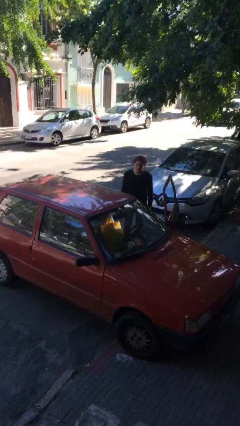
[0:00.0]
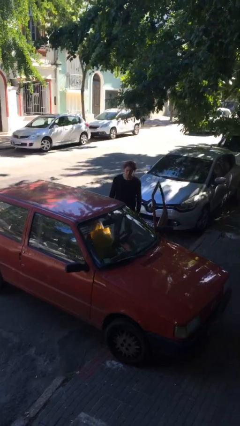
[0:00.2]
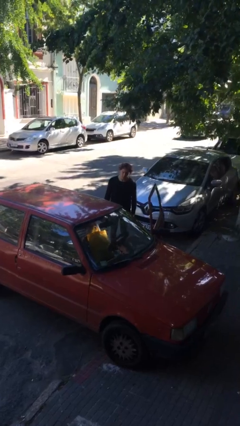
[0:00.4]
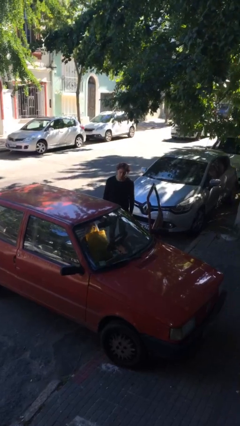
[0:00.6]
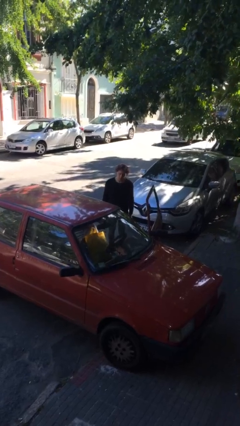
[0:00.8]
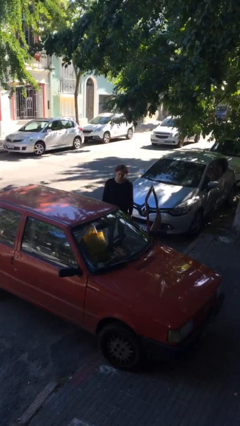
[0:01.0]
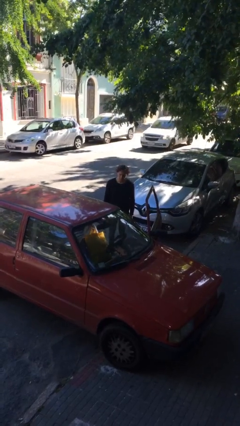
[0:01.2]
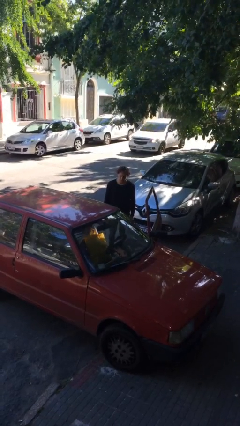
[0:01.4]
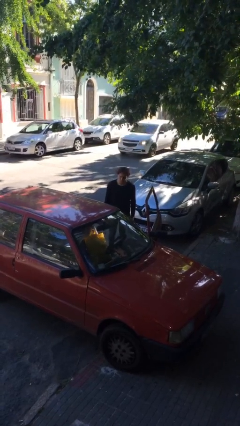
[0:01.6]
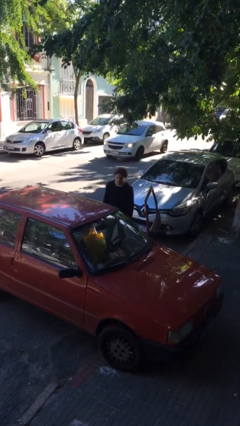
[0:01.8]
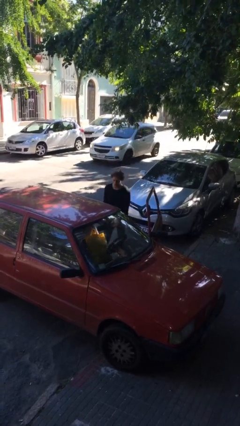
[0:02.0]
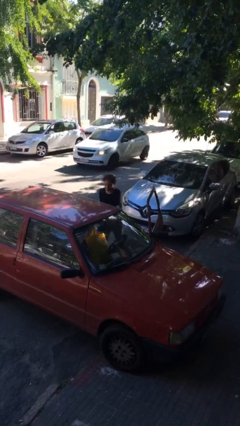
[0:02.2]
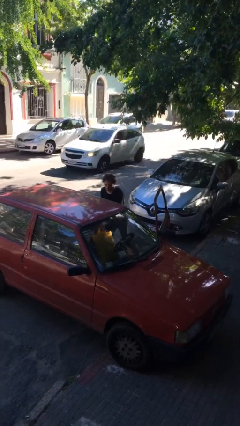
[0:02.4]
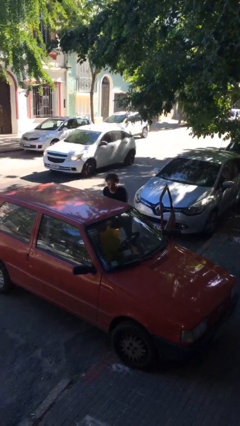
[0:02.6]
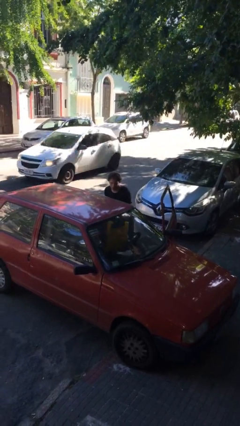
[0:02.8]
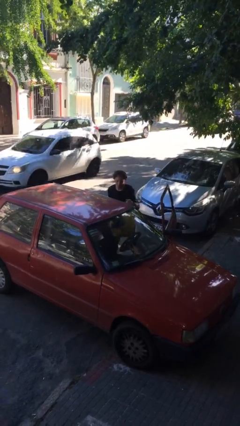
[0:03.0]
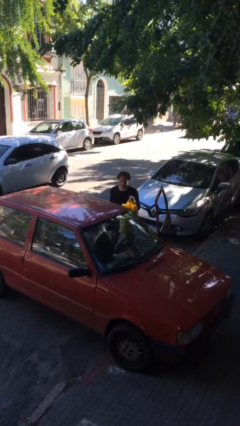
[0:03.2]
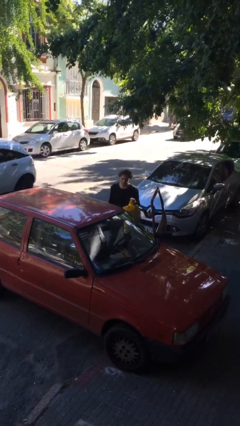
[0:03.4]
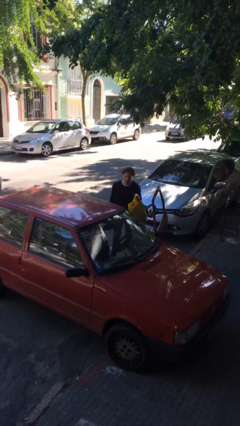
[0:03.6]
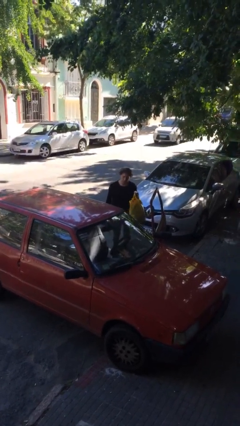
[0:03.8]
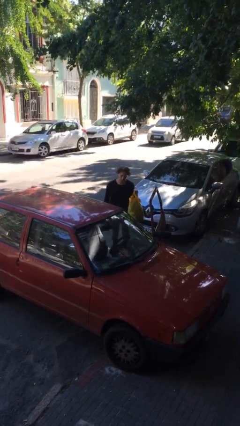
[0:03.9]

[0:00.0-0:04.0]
person unloads car

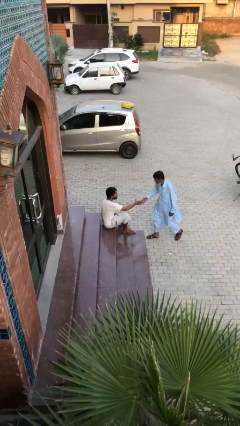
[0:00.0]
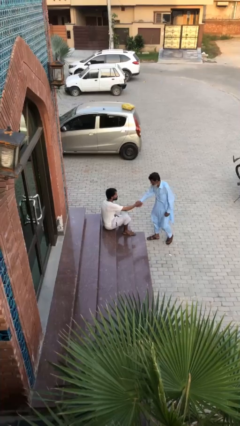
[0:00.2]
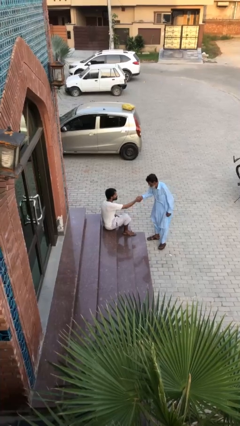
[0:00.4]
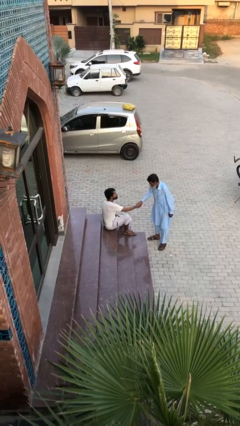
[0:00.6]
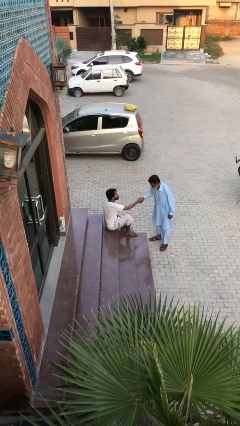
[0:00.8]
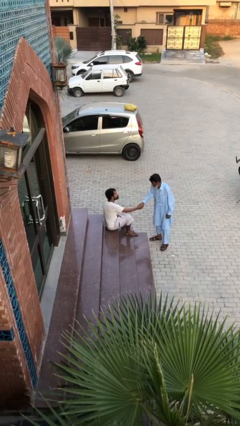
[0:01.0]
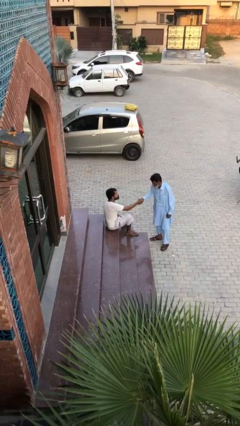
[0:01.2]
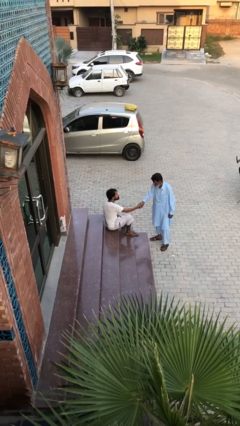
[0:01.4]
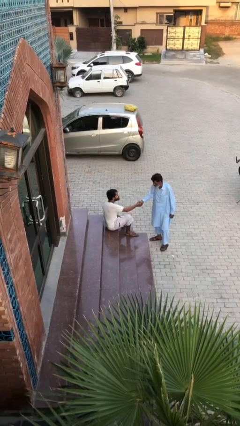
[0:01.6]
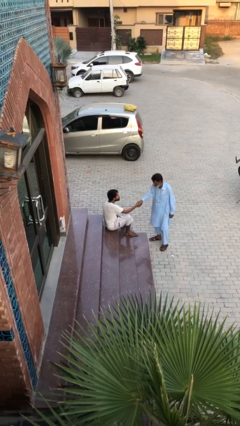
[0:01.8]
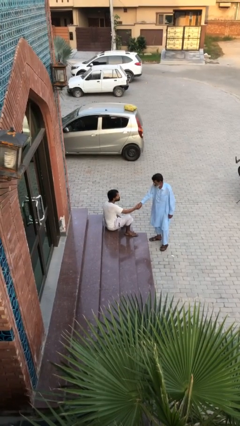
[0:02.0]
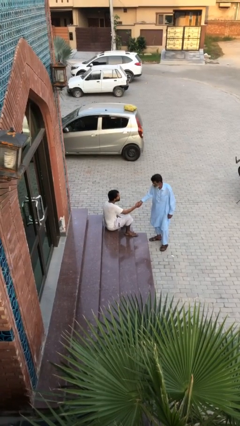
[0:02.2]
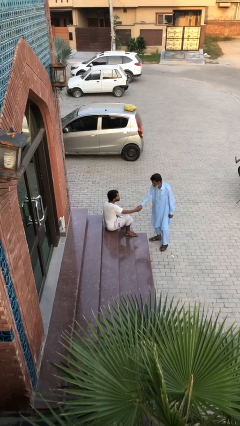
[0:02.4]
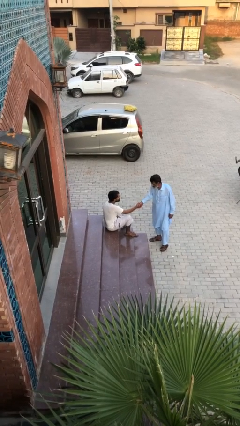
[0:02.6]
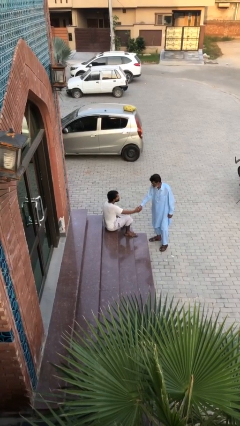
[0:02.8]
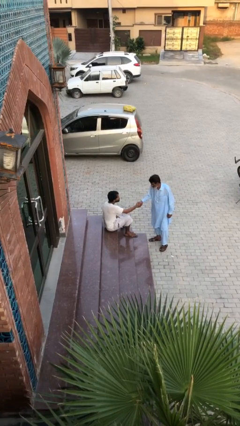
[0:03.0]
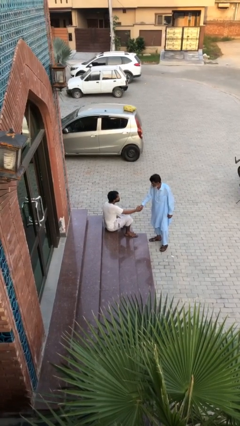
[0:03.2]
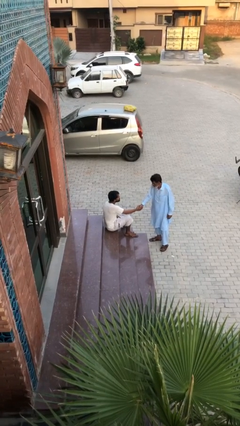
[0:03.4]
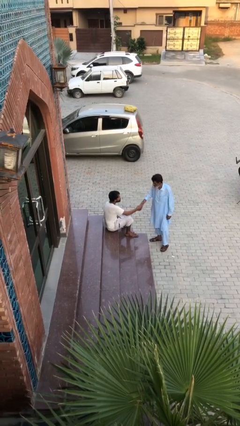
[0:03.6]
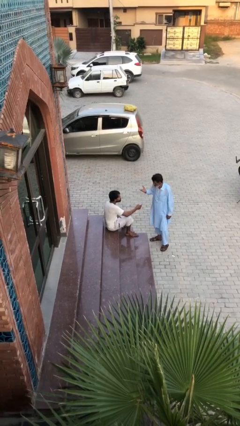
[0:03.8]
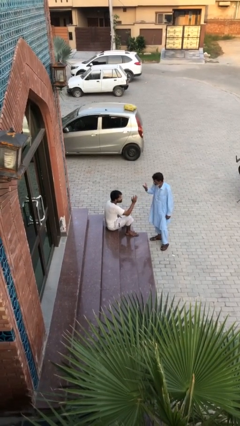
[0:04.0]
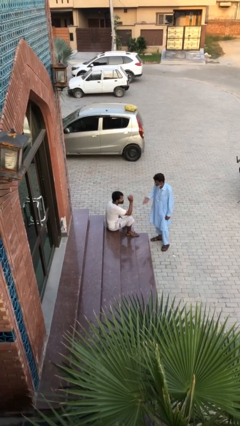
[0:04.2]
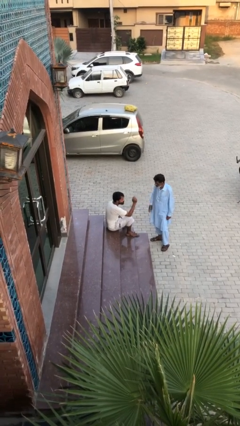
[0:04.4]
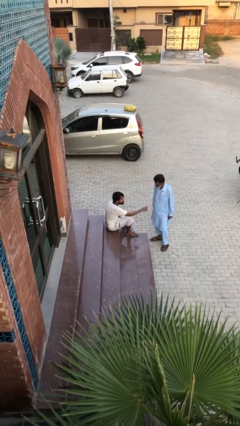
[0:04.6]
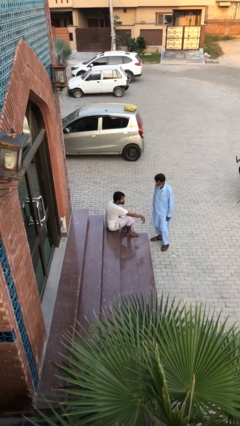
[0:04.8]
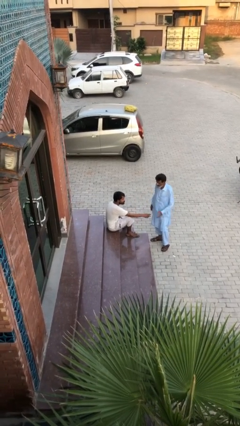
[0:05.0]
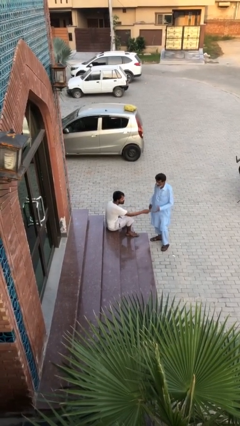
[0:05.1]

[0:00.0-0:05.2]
person shakes hand

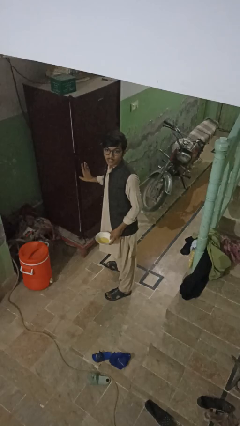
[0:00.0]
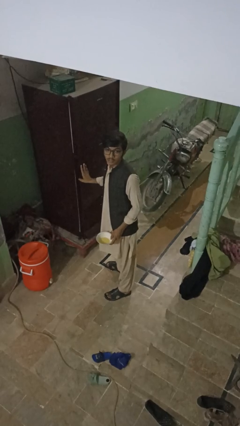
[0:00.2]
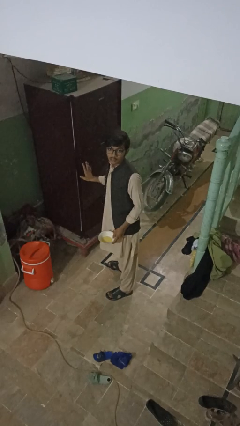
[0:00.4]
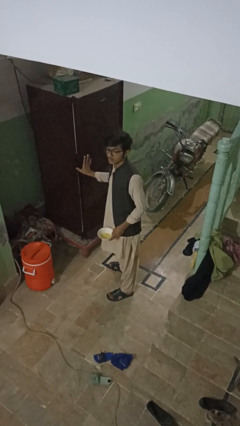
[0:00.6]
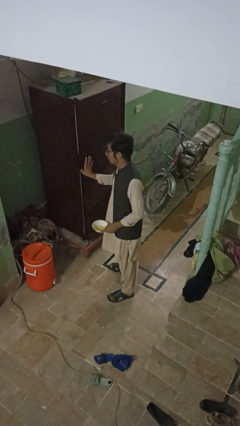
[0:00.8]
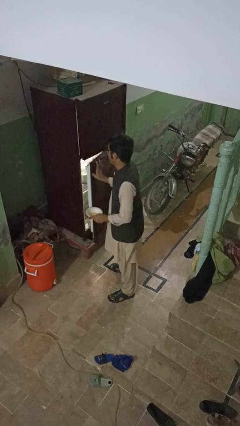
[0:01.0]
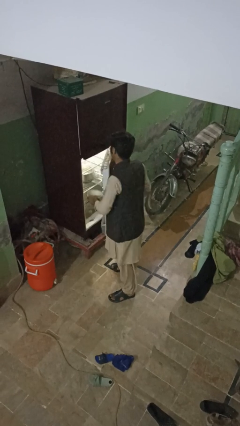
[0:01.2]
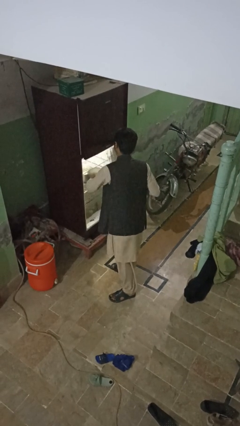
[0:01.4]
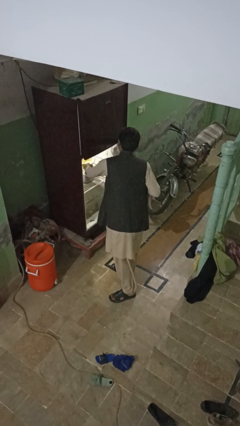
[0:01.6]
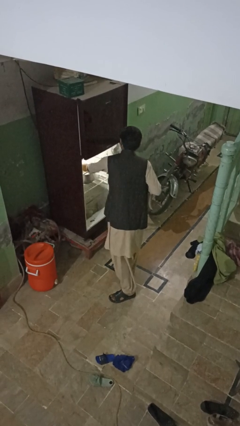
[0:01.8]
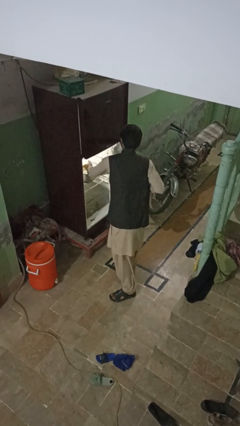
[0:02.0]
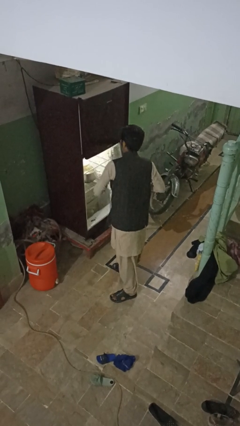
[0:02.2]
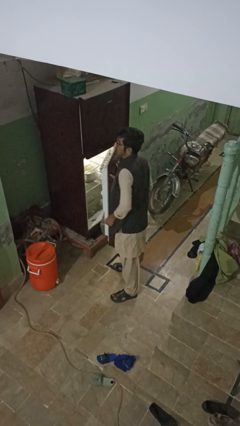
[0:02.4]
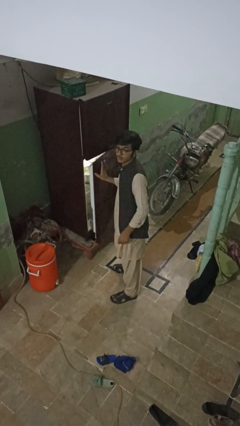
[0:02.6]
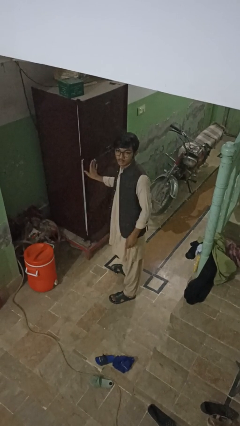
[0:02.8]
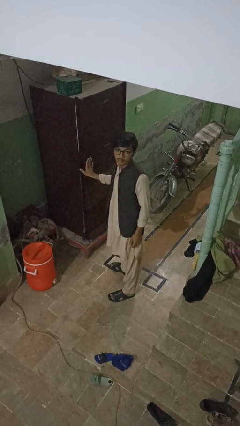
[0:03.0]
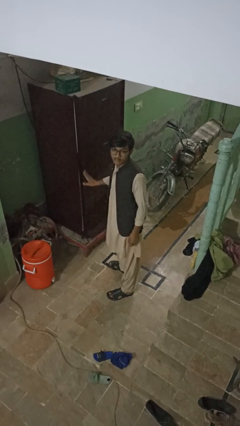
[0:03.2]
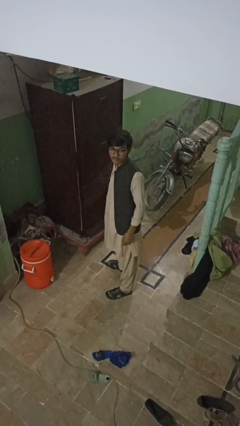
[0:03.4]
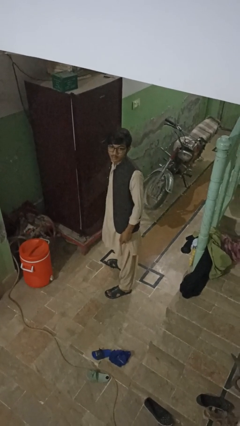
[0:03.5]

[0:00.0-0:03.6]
person puts object into refrigerator

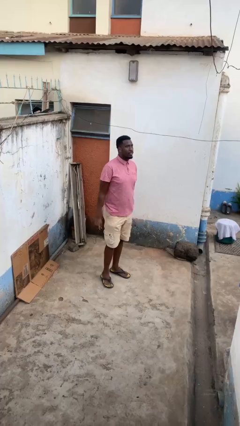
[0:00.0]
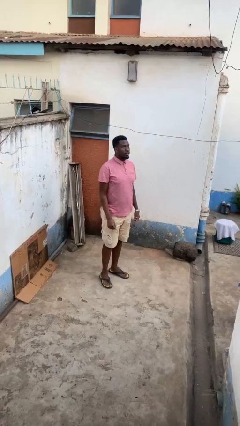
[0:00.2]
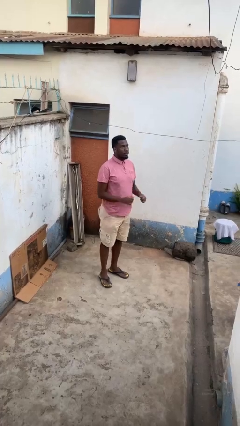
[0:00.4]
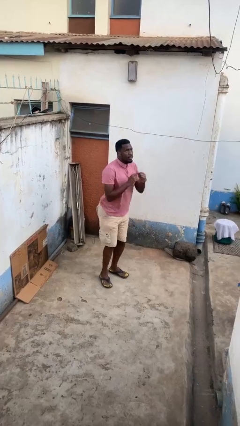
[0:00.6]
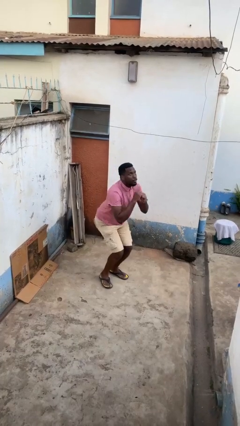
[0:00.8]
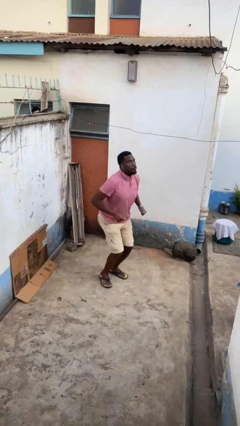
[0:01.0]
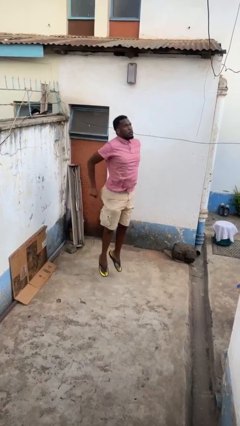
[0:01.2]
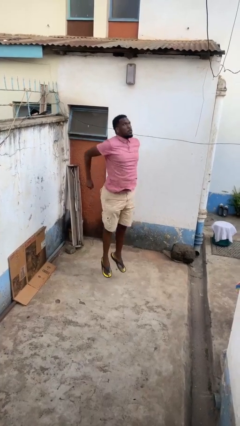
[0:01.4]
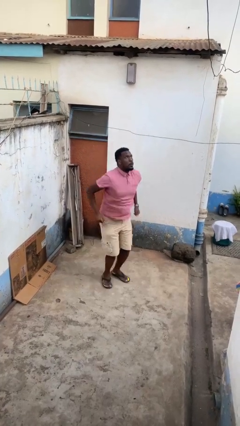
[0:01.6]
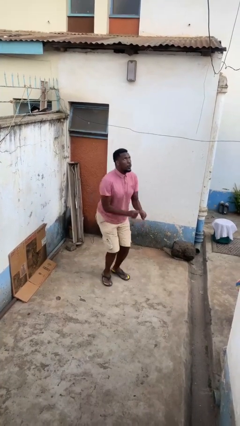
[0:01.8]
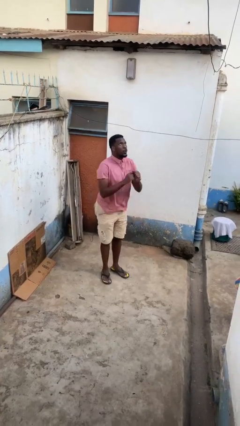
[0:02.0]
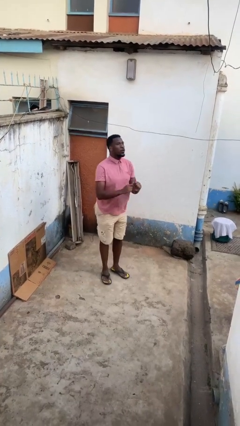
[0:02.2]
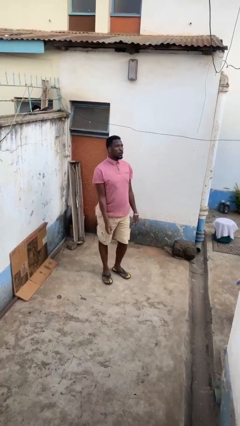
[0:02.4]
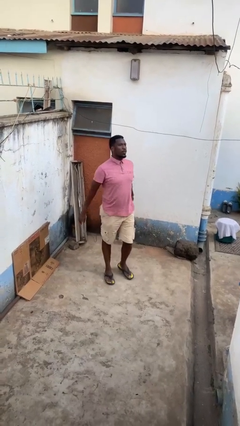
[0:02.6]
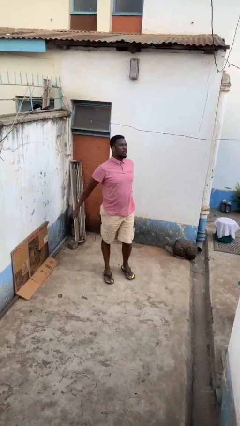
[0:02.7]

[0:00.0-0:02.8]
person jumps

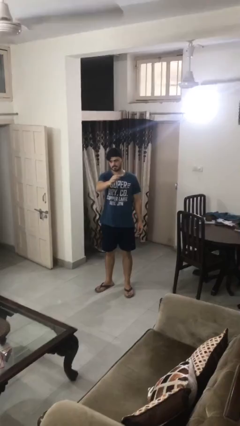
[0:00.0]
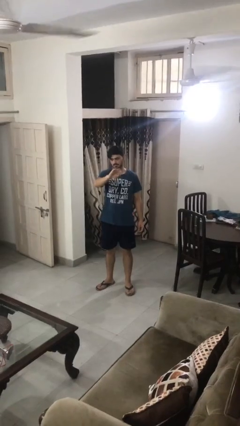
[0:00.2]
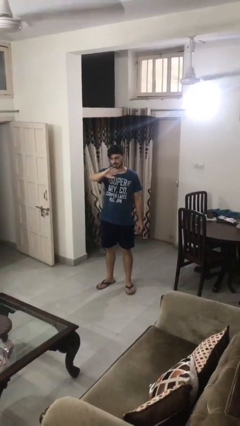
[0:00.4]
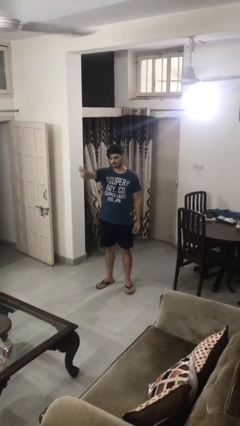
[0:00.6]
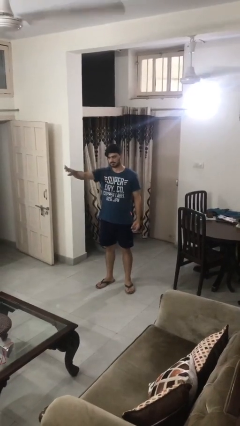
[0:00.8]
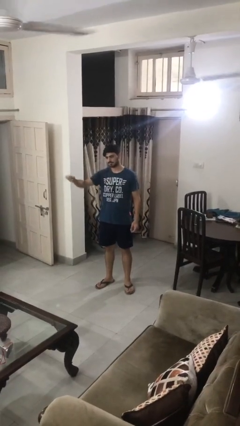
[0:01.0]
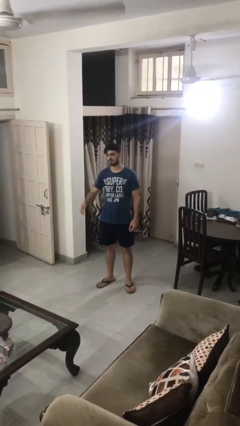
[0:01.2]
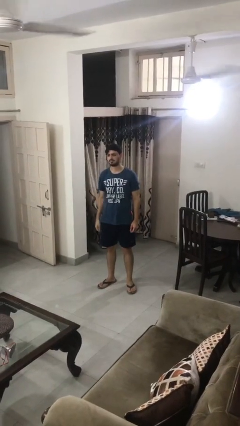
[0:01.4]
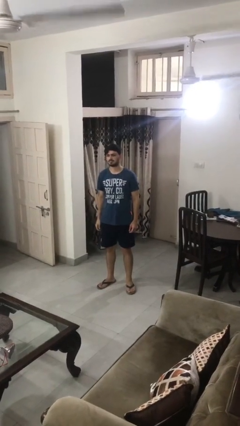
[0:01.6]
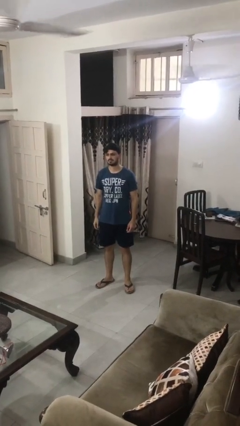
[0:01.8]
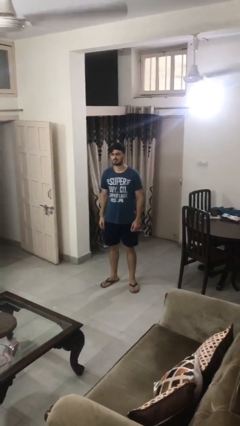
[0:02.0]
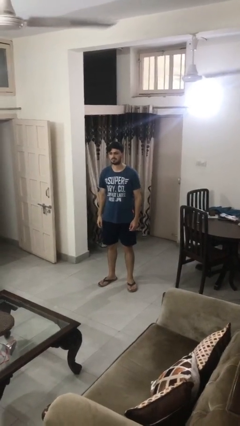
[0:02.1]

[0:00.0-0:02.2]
person gestures swipe right
